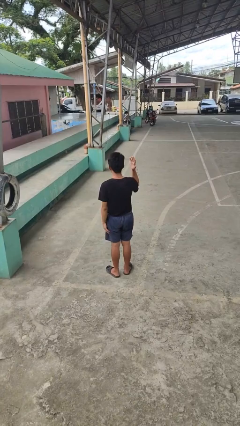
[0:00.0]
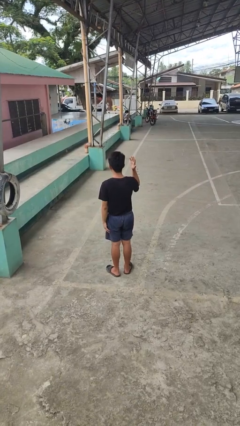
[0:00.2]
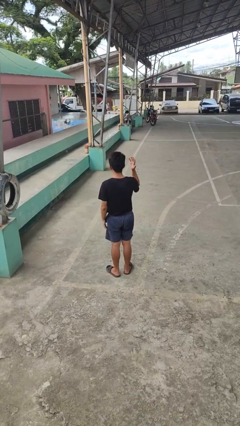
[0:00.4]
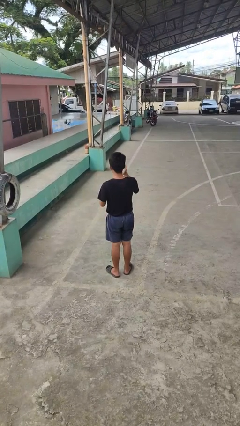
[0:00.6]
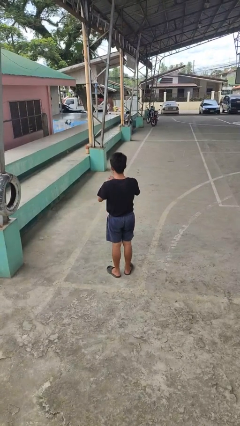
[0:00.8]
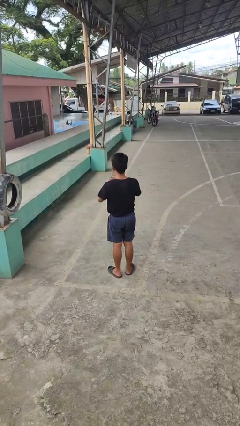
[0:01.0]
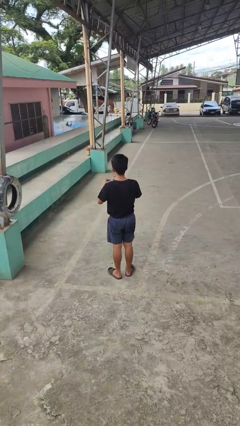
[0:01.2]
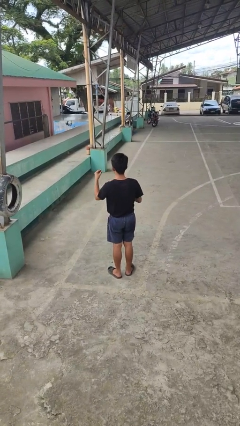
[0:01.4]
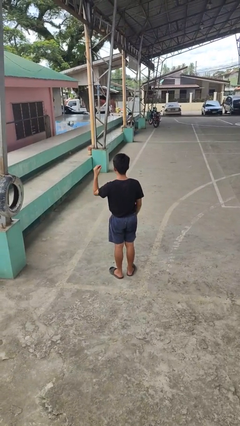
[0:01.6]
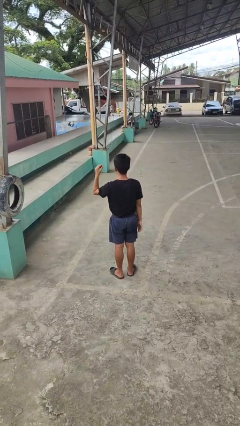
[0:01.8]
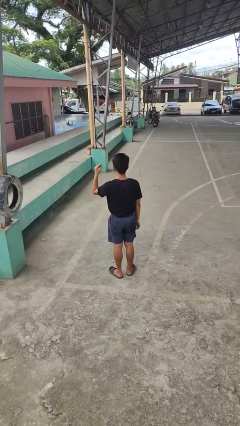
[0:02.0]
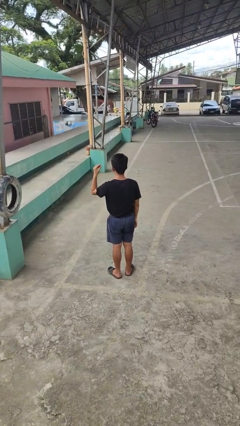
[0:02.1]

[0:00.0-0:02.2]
person takes off ring

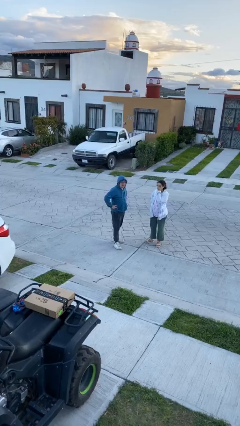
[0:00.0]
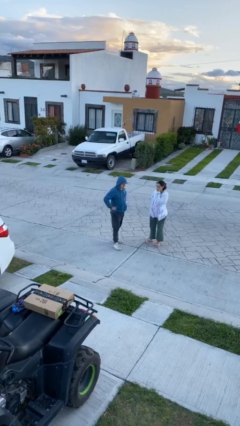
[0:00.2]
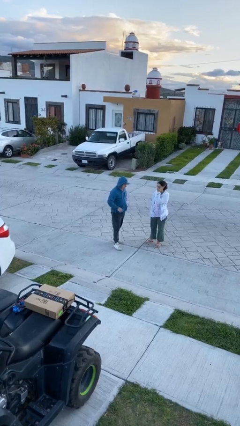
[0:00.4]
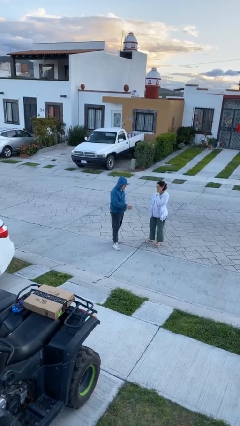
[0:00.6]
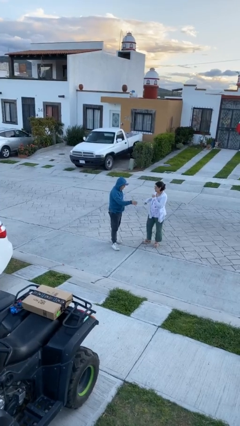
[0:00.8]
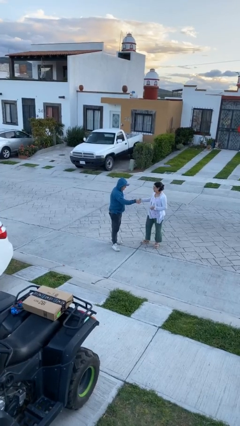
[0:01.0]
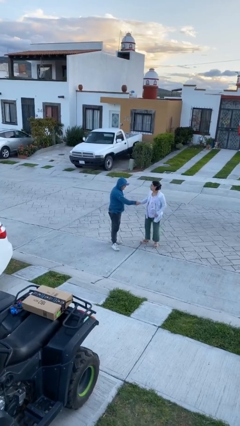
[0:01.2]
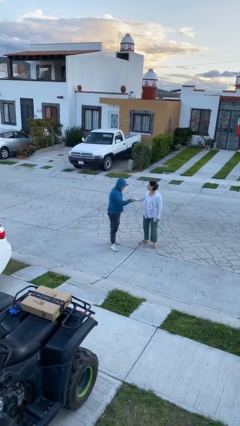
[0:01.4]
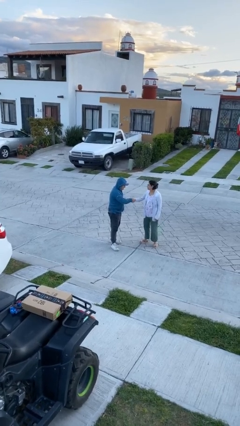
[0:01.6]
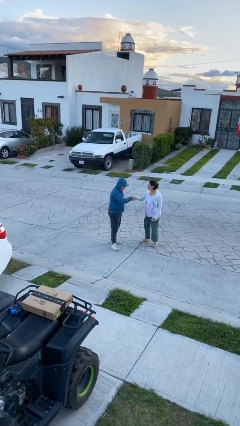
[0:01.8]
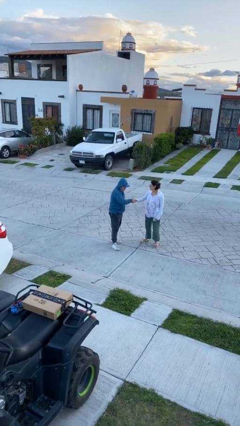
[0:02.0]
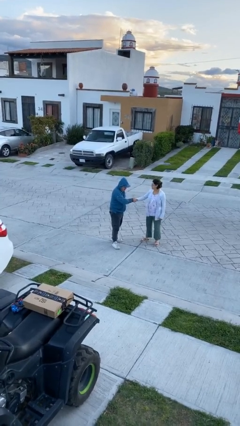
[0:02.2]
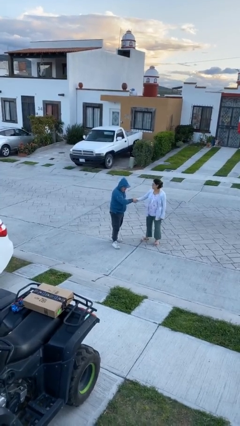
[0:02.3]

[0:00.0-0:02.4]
person shakes hand

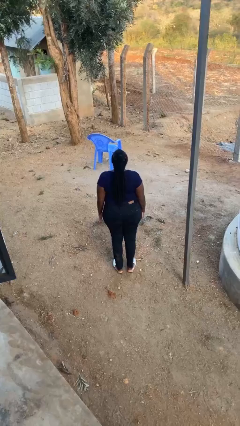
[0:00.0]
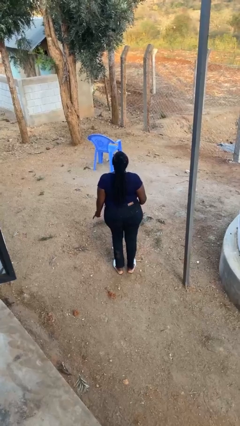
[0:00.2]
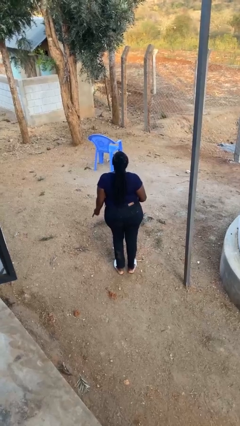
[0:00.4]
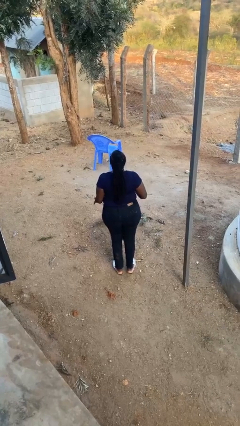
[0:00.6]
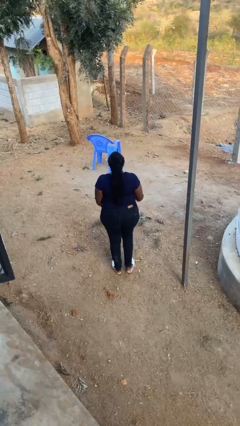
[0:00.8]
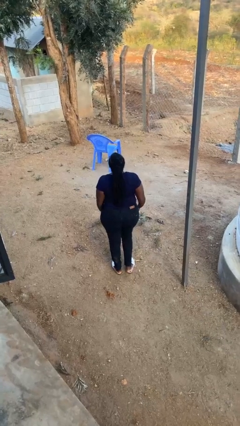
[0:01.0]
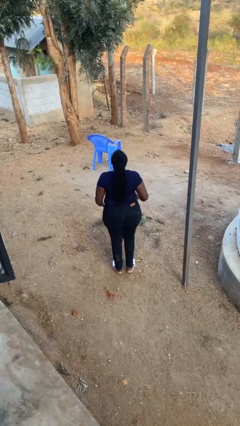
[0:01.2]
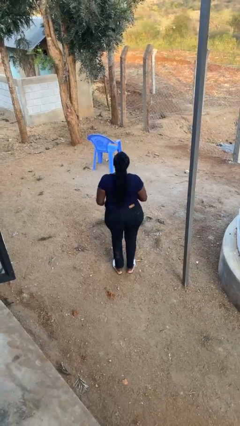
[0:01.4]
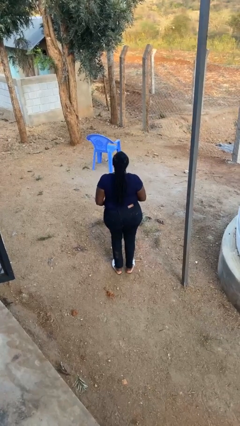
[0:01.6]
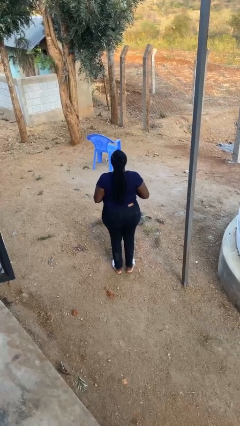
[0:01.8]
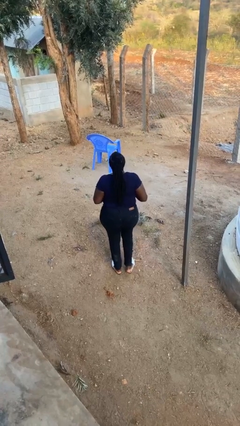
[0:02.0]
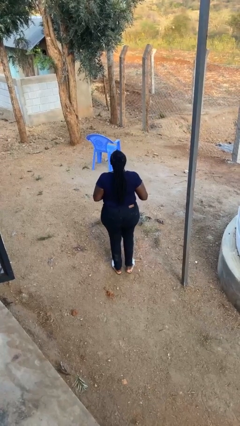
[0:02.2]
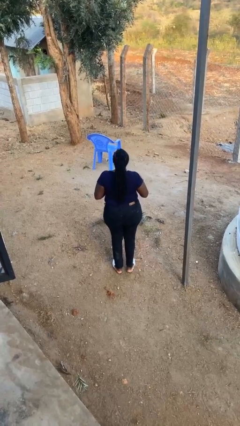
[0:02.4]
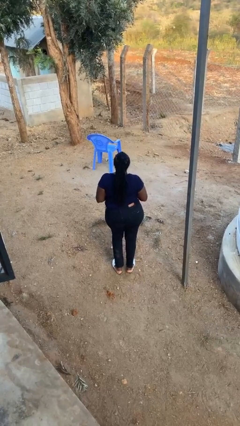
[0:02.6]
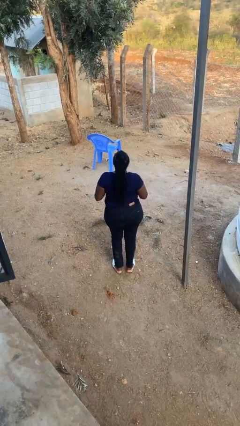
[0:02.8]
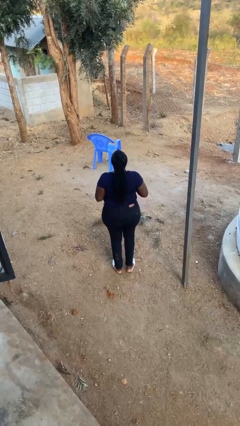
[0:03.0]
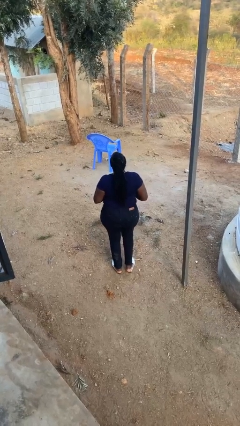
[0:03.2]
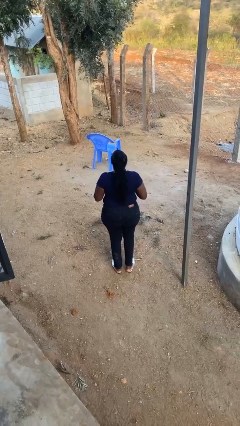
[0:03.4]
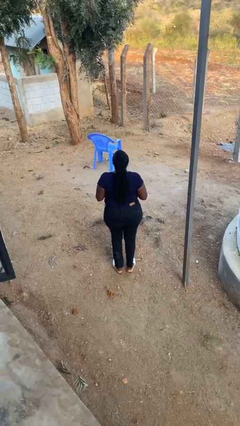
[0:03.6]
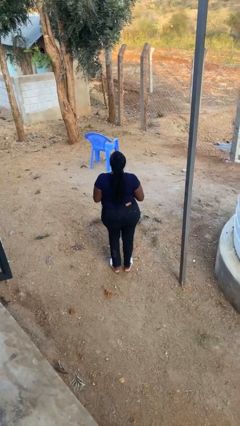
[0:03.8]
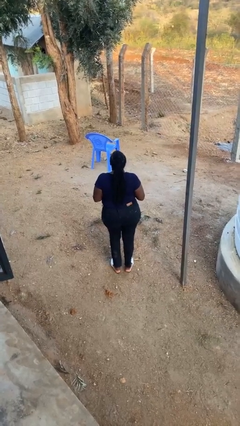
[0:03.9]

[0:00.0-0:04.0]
person wiggles hips

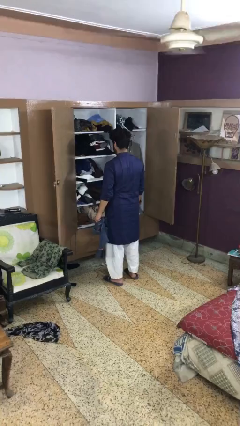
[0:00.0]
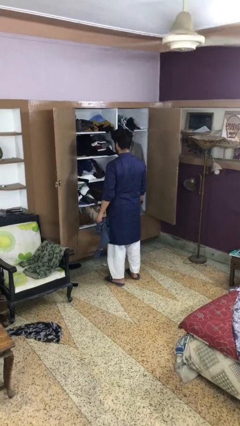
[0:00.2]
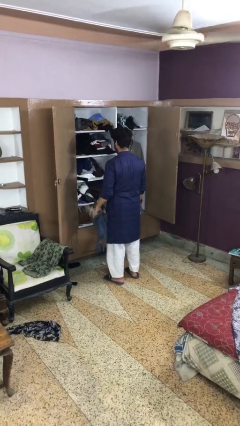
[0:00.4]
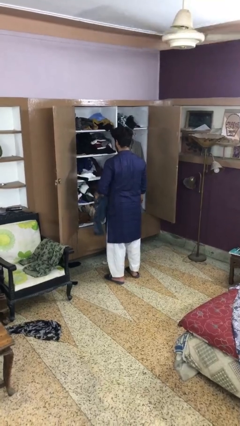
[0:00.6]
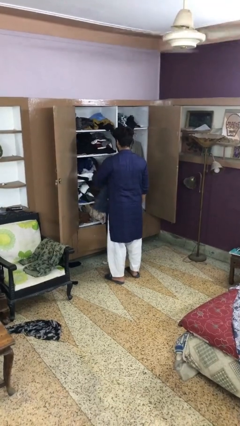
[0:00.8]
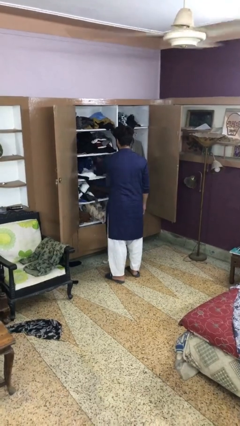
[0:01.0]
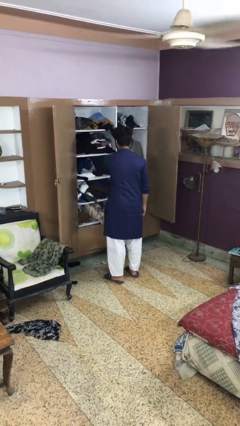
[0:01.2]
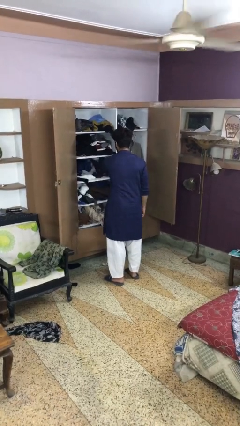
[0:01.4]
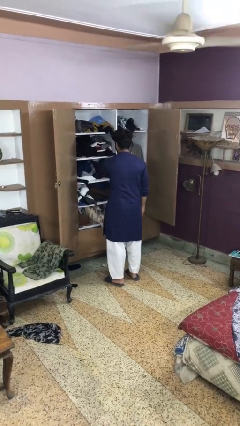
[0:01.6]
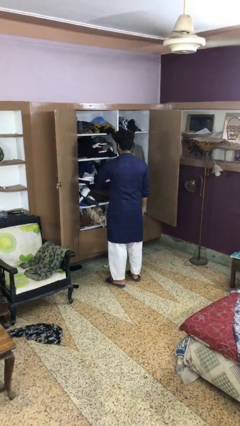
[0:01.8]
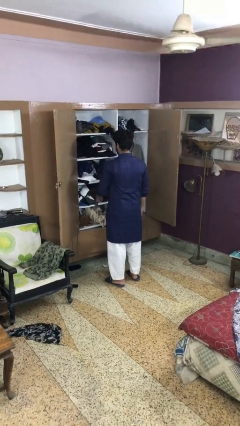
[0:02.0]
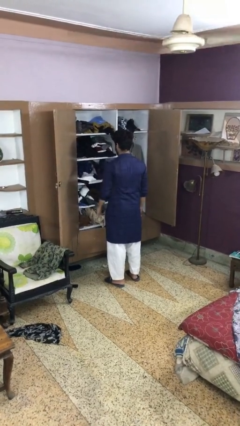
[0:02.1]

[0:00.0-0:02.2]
person puts clothes into dresser

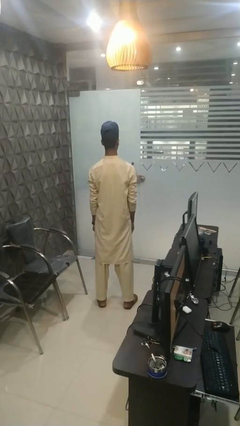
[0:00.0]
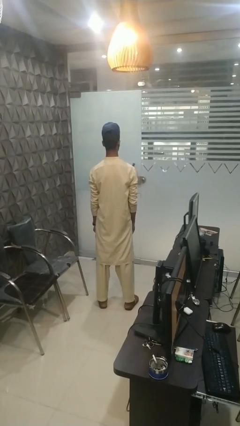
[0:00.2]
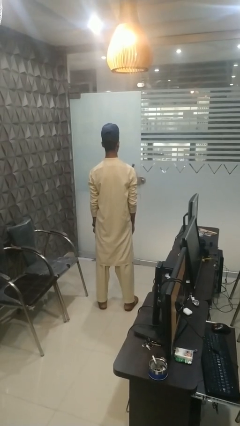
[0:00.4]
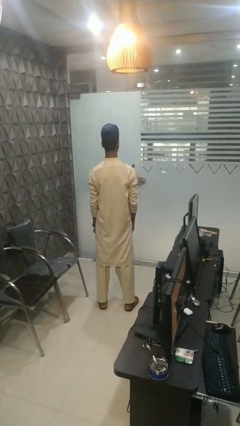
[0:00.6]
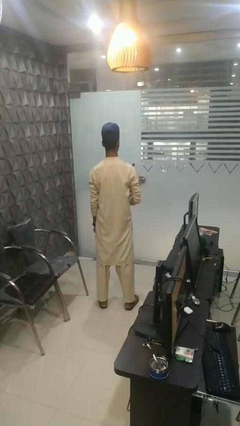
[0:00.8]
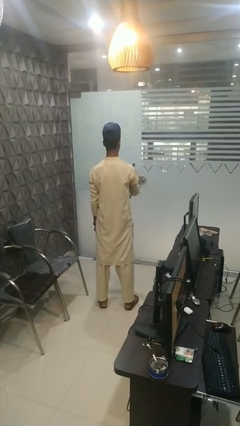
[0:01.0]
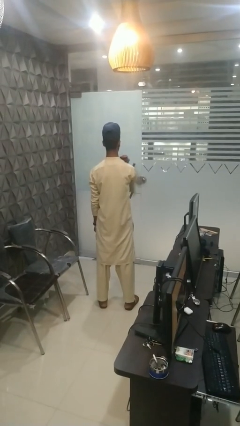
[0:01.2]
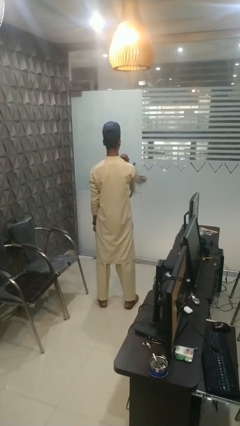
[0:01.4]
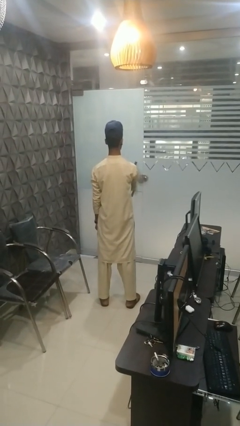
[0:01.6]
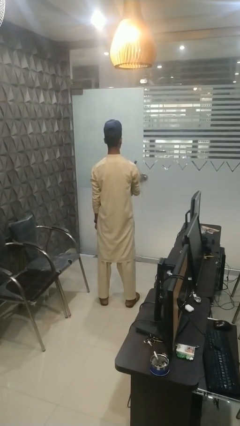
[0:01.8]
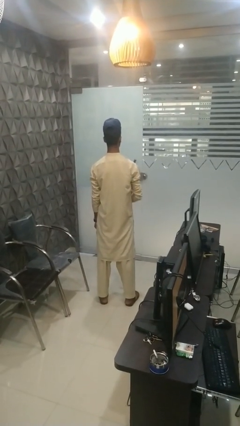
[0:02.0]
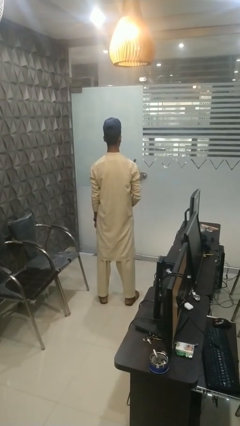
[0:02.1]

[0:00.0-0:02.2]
person gestures cut

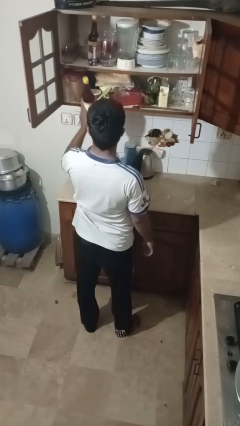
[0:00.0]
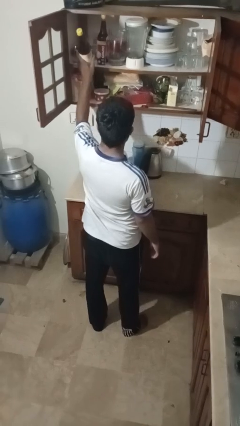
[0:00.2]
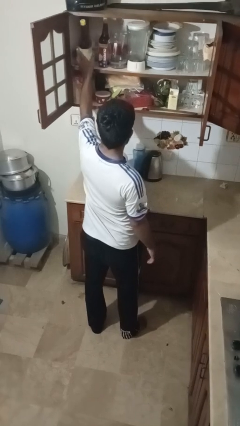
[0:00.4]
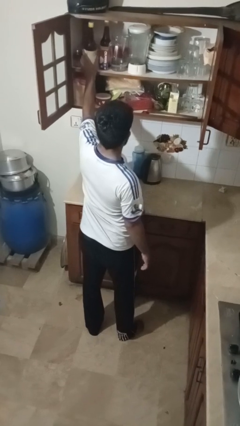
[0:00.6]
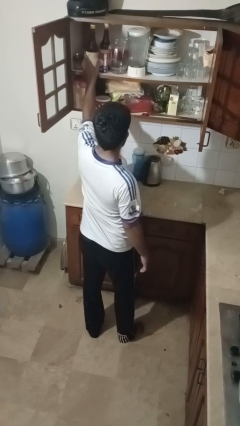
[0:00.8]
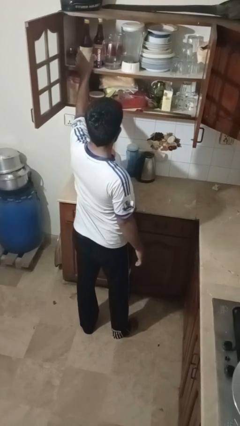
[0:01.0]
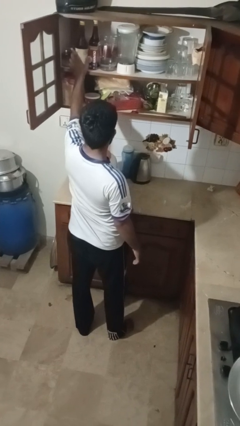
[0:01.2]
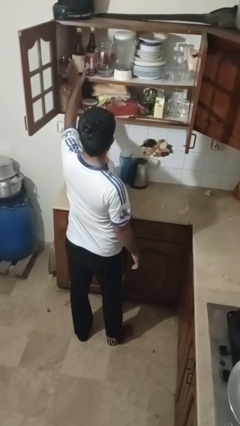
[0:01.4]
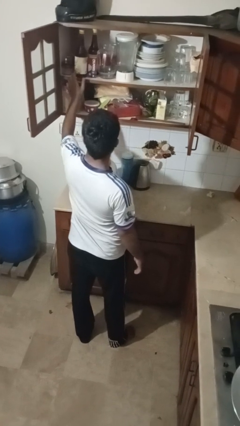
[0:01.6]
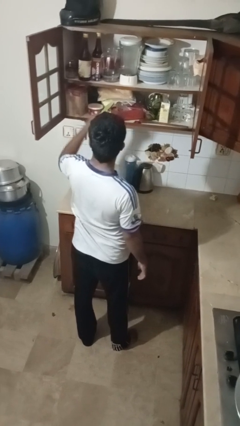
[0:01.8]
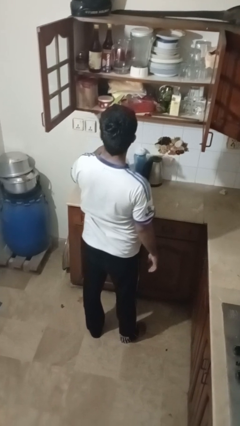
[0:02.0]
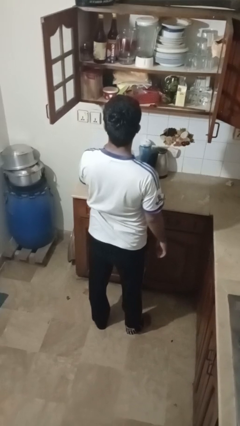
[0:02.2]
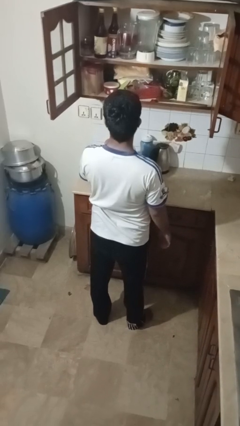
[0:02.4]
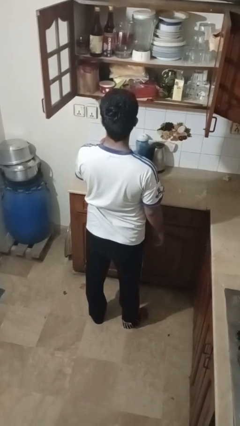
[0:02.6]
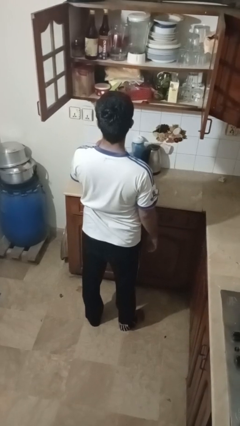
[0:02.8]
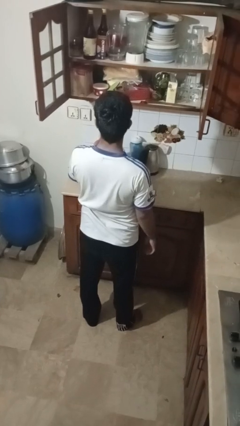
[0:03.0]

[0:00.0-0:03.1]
person puts object in cabinet

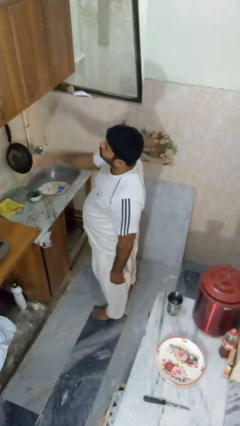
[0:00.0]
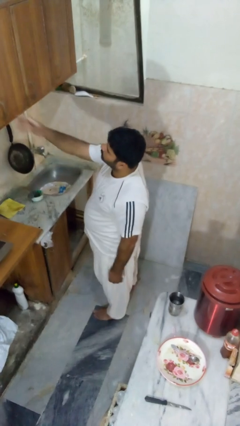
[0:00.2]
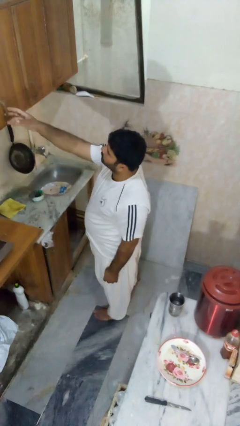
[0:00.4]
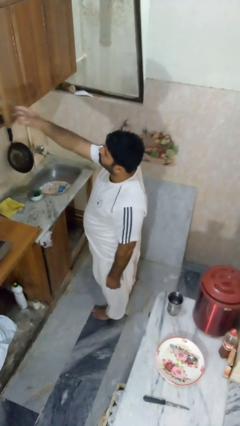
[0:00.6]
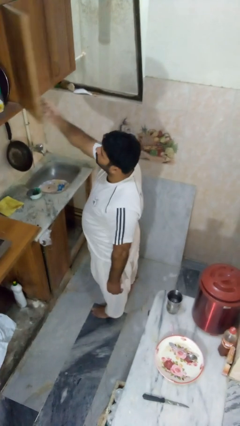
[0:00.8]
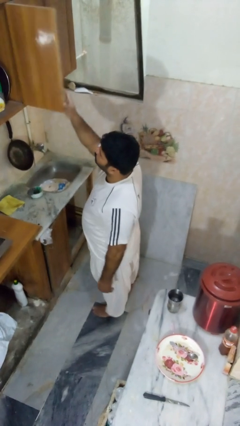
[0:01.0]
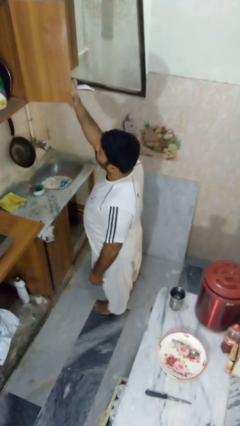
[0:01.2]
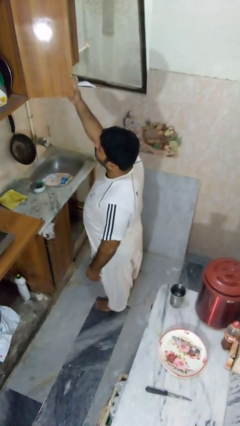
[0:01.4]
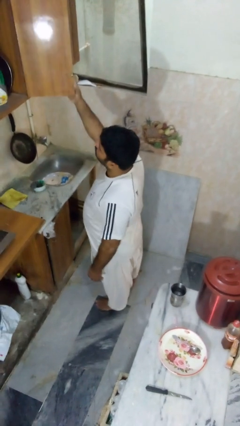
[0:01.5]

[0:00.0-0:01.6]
person opens cabinet
